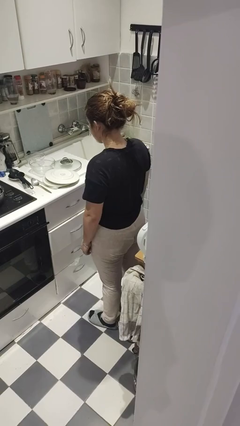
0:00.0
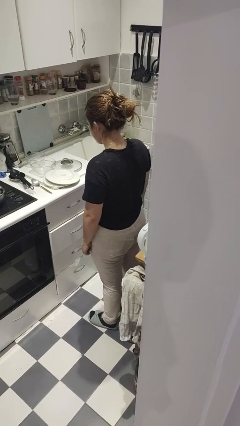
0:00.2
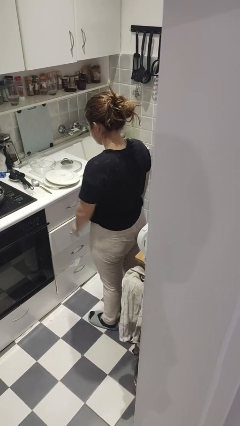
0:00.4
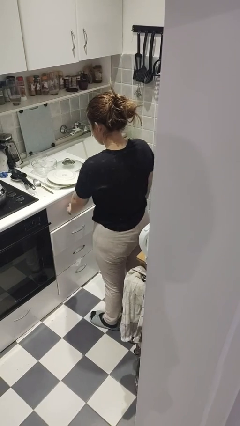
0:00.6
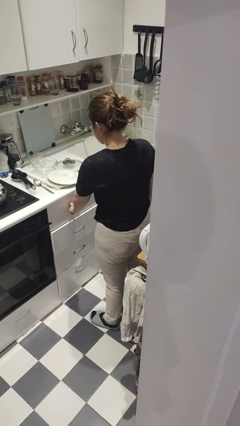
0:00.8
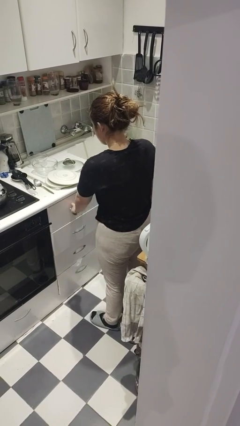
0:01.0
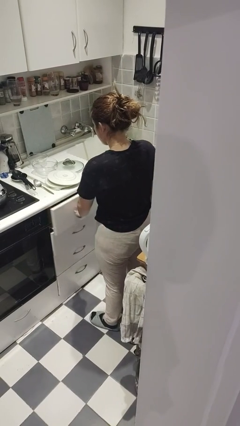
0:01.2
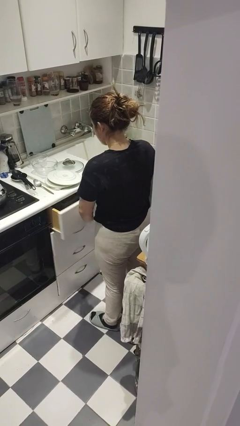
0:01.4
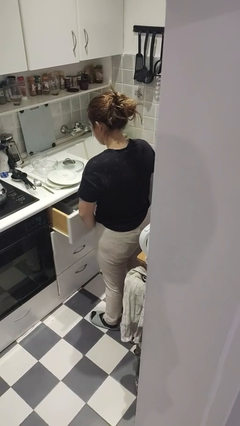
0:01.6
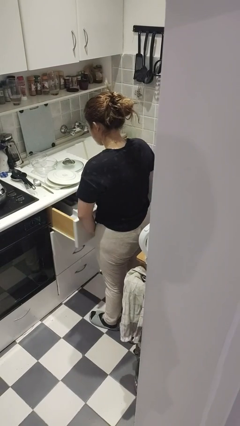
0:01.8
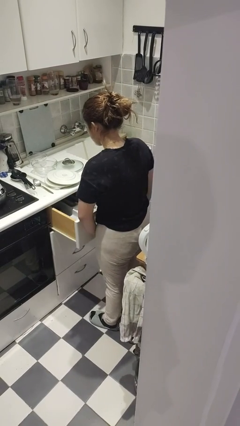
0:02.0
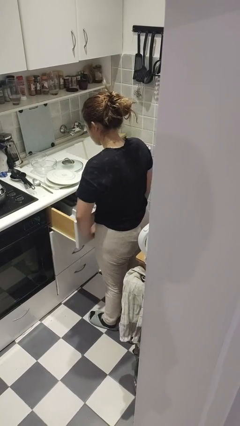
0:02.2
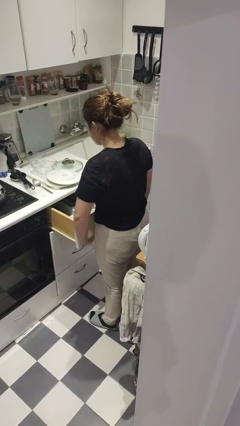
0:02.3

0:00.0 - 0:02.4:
person opens kitchen drawer

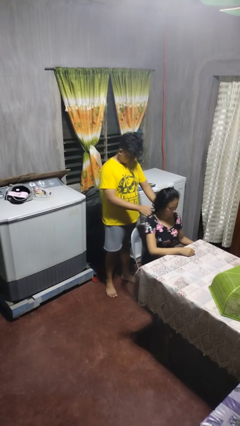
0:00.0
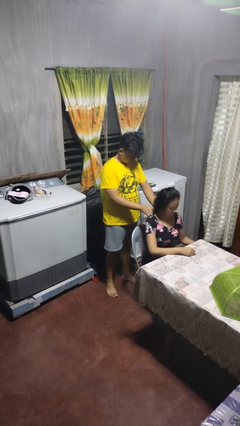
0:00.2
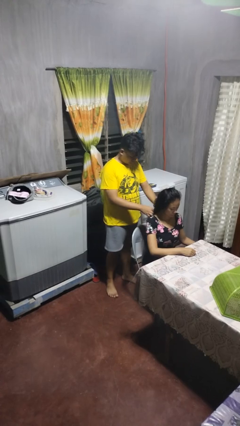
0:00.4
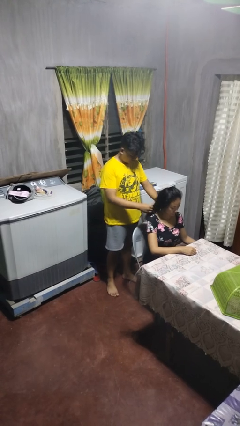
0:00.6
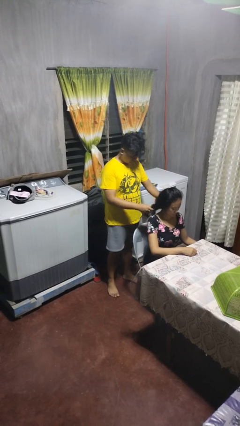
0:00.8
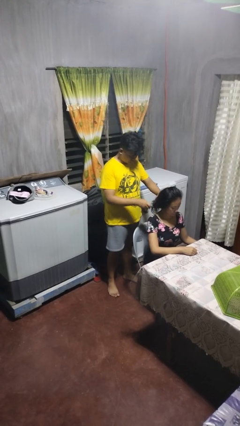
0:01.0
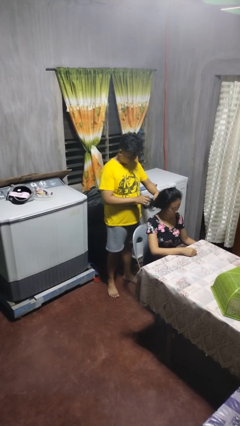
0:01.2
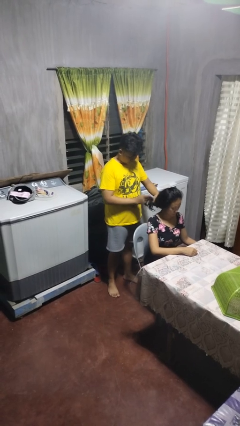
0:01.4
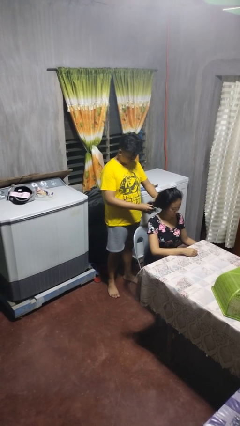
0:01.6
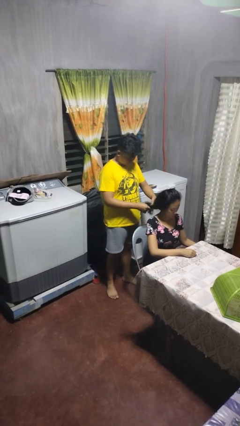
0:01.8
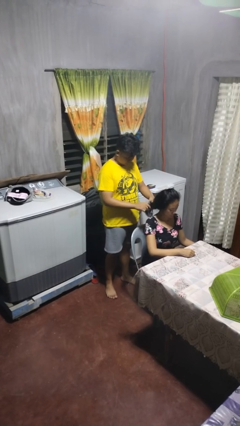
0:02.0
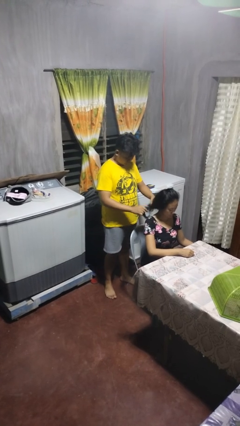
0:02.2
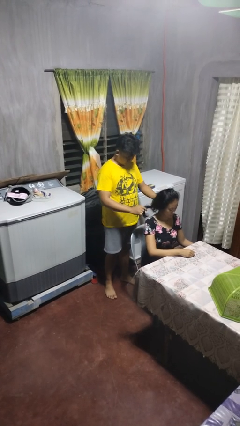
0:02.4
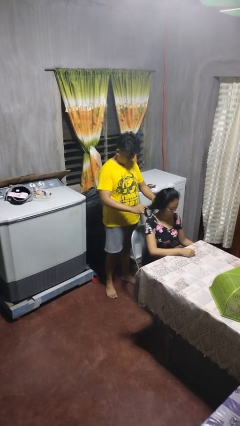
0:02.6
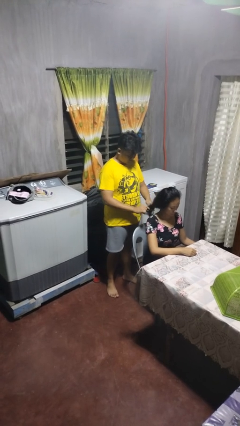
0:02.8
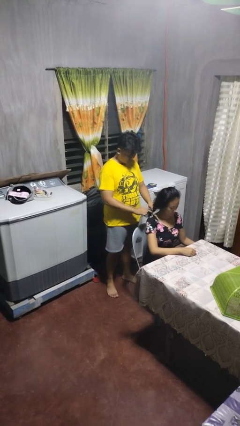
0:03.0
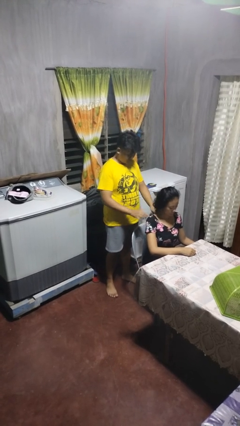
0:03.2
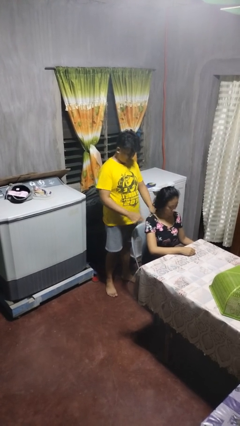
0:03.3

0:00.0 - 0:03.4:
person braids hair of person

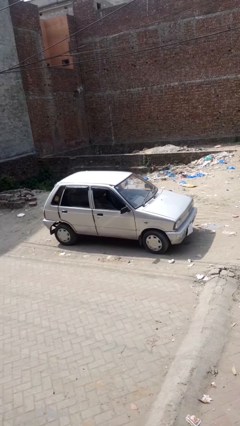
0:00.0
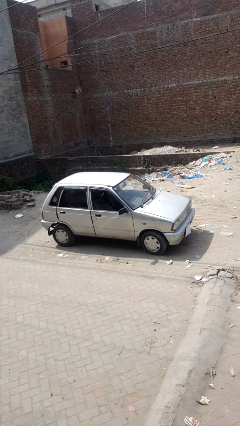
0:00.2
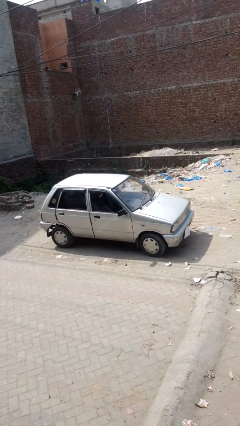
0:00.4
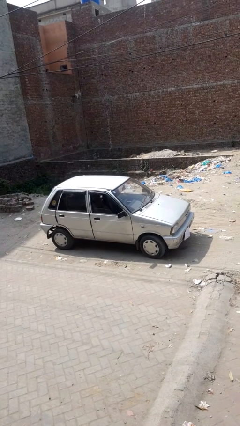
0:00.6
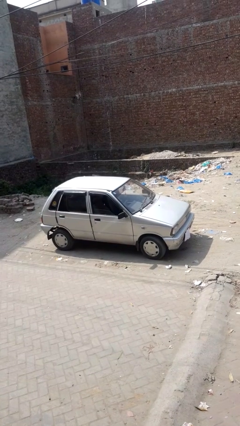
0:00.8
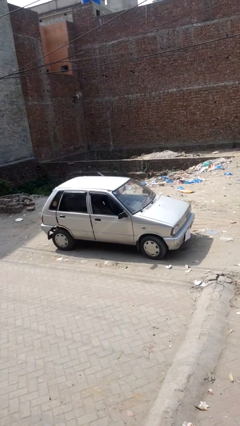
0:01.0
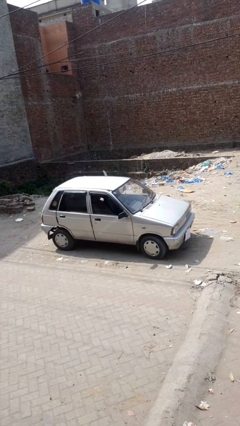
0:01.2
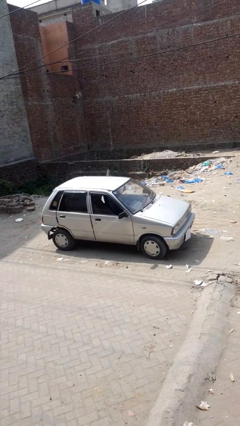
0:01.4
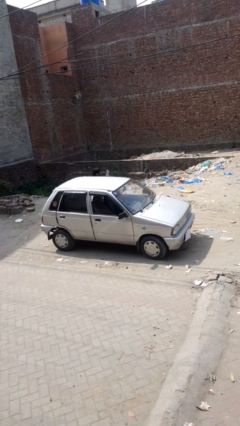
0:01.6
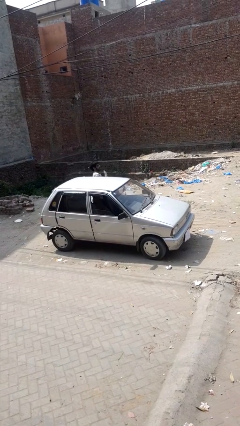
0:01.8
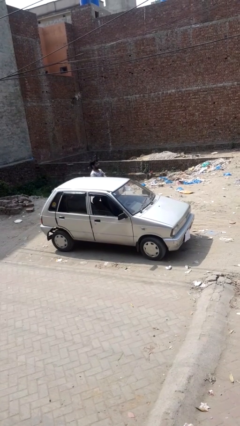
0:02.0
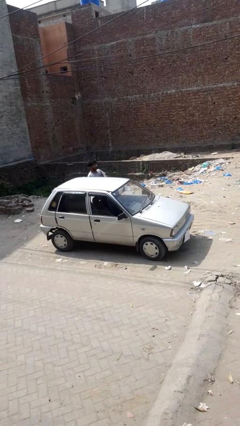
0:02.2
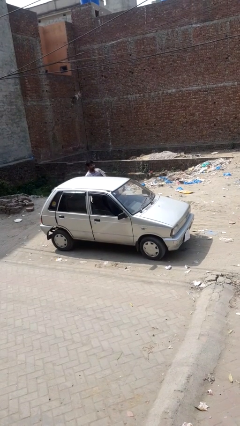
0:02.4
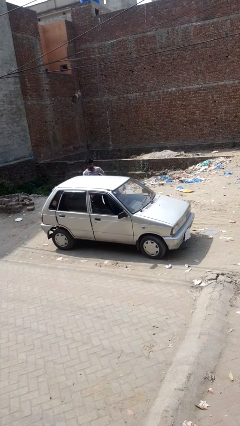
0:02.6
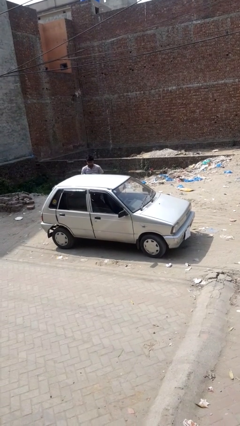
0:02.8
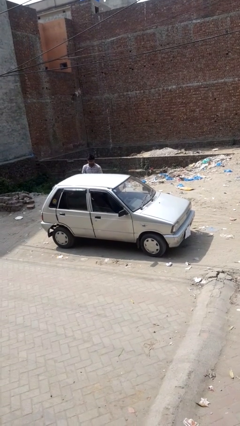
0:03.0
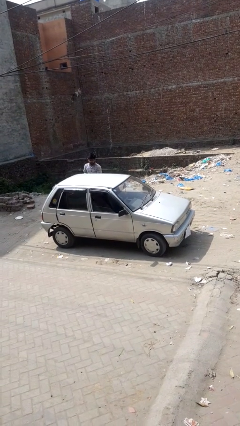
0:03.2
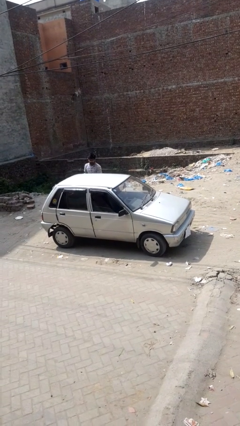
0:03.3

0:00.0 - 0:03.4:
car drops off person

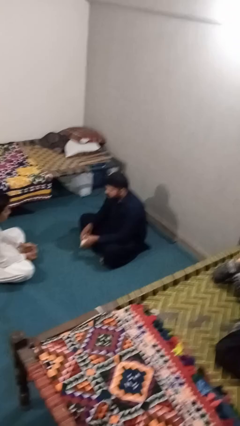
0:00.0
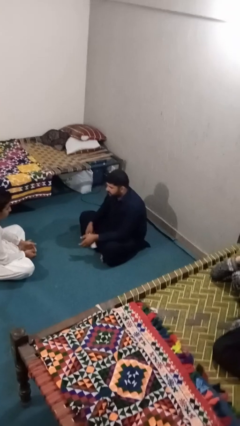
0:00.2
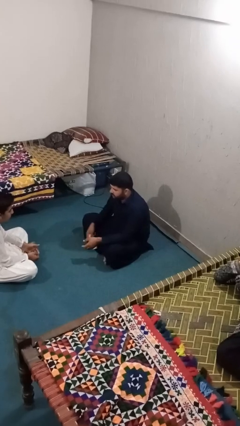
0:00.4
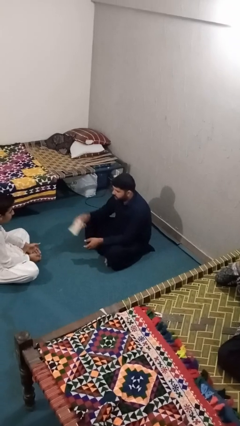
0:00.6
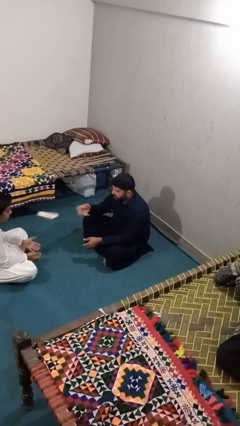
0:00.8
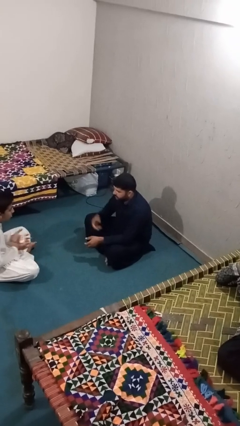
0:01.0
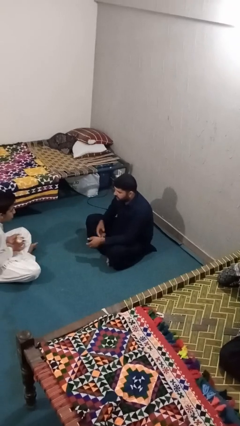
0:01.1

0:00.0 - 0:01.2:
person throws object to person

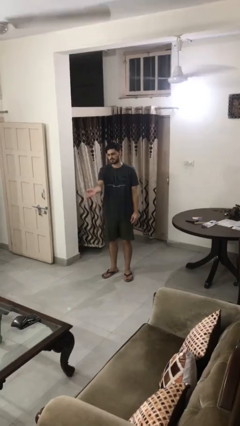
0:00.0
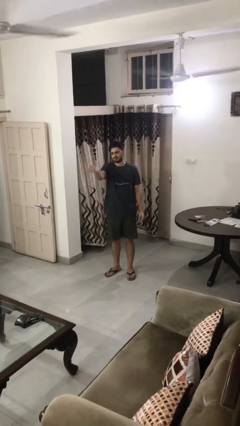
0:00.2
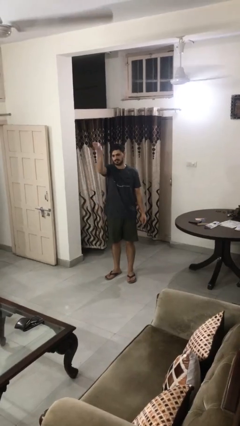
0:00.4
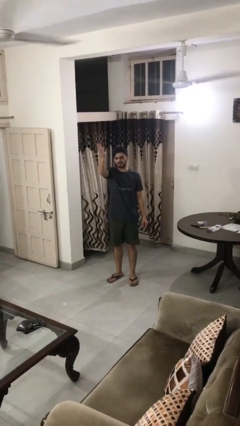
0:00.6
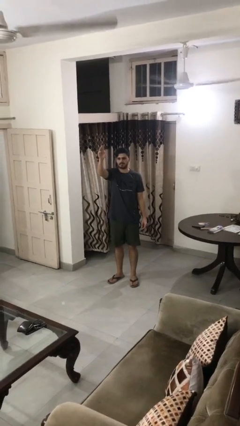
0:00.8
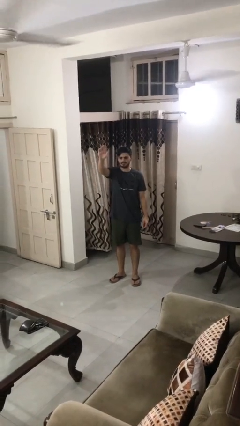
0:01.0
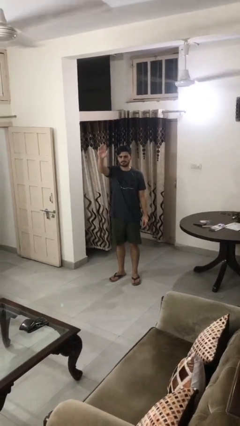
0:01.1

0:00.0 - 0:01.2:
person gestures swipe up

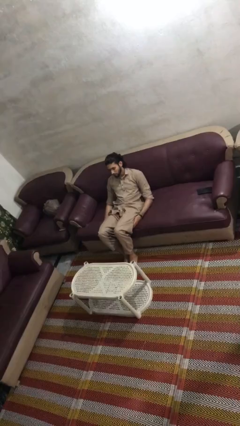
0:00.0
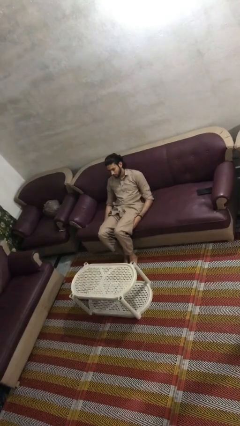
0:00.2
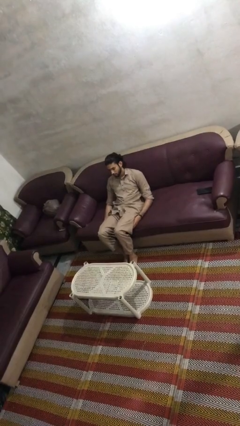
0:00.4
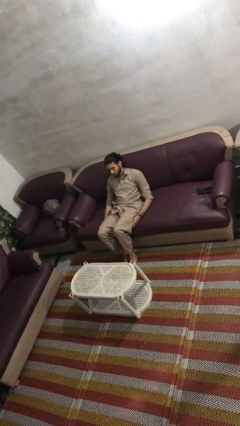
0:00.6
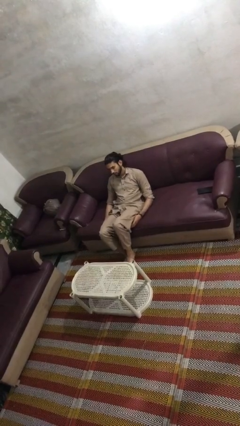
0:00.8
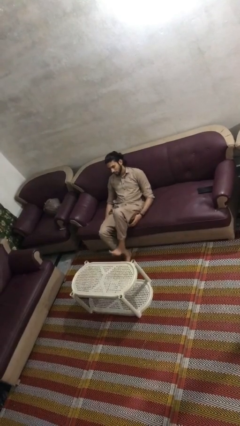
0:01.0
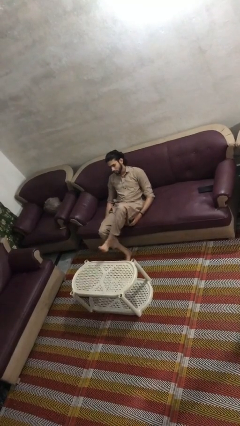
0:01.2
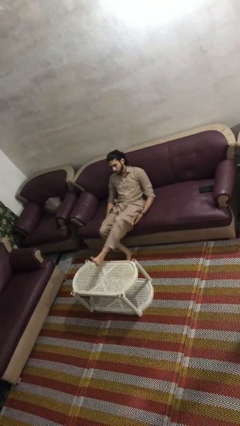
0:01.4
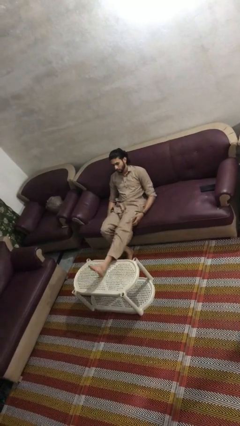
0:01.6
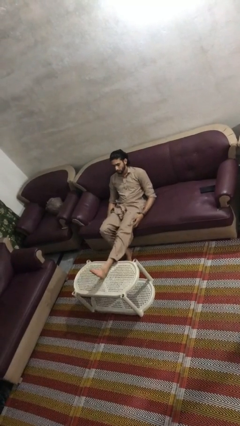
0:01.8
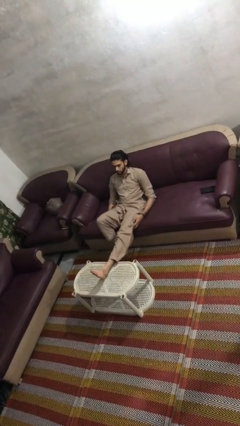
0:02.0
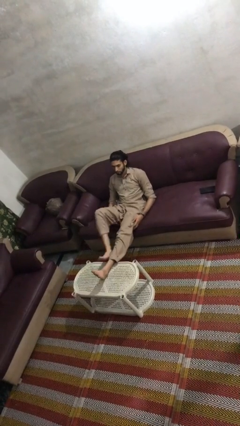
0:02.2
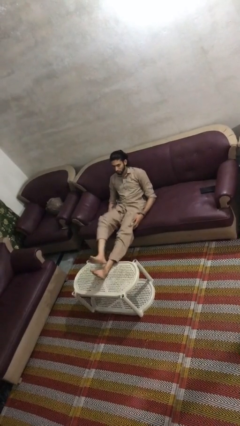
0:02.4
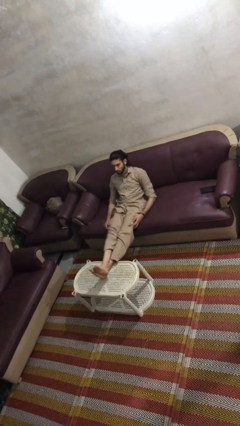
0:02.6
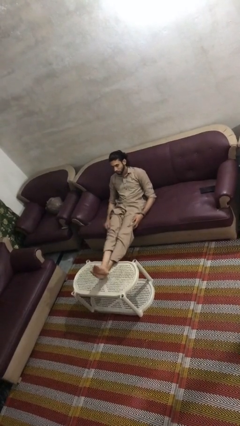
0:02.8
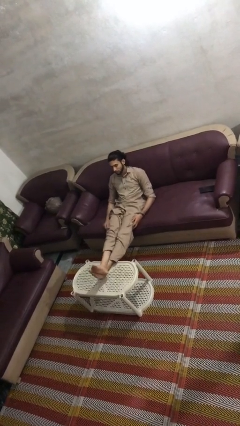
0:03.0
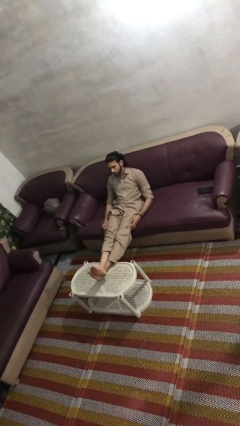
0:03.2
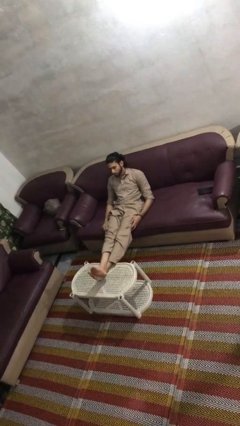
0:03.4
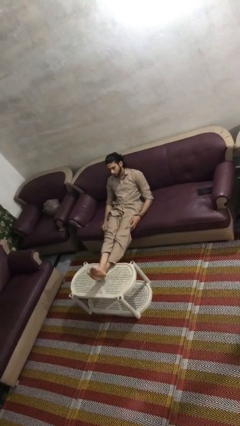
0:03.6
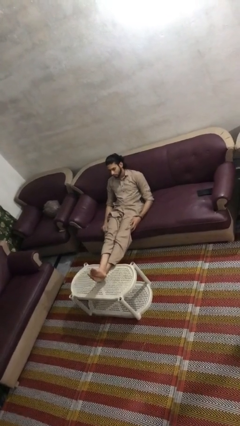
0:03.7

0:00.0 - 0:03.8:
person puts feet up

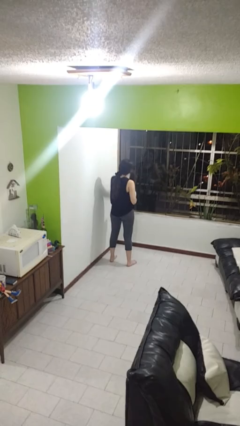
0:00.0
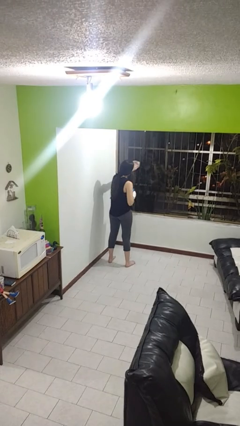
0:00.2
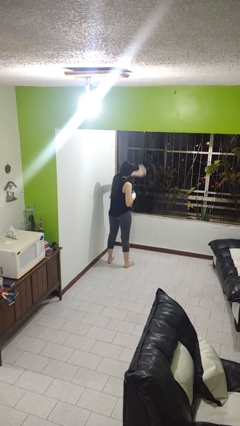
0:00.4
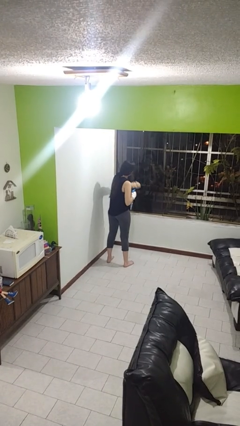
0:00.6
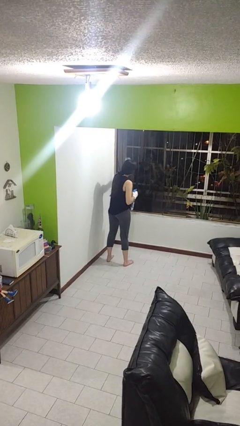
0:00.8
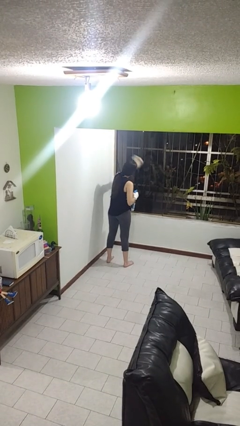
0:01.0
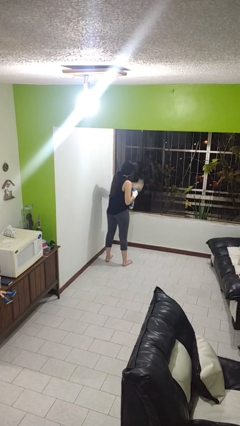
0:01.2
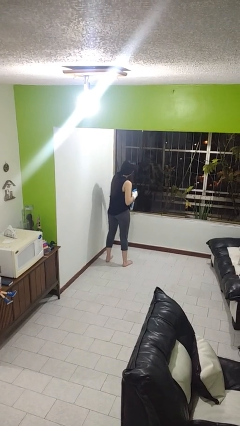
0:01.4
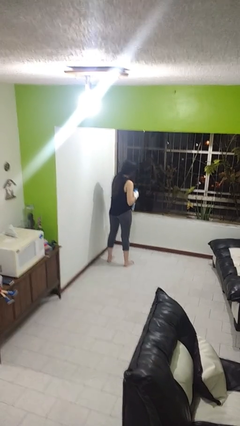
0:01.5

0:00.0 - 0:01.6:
person washes window
